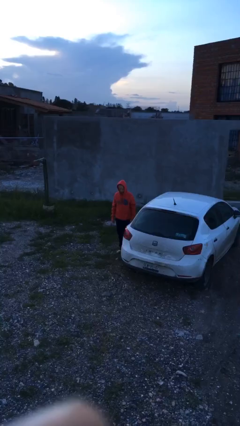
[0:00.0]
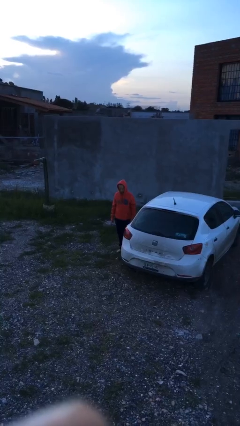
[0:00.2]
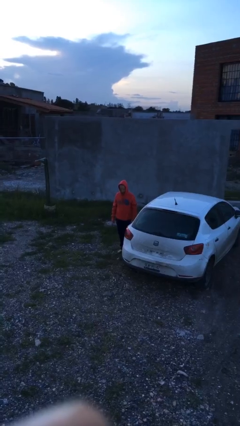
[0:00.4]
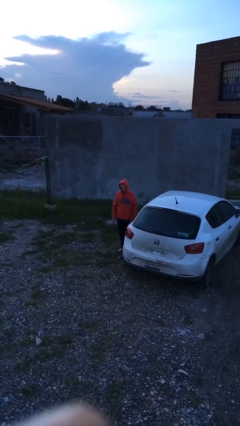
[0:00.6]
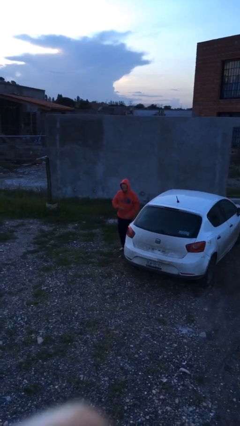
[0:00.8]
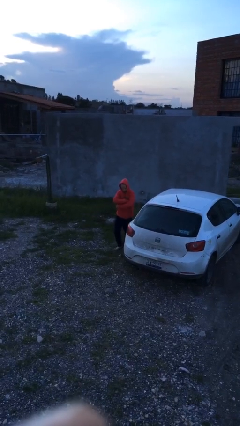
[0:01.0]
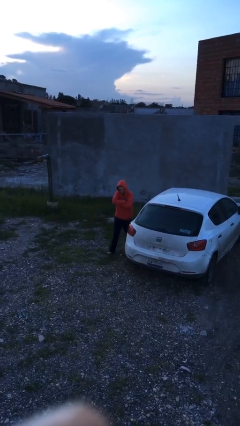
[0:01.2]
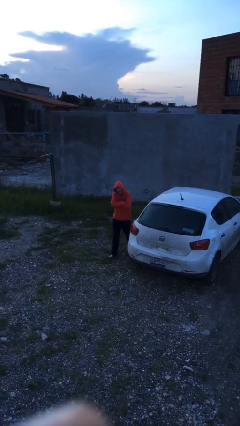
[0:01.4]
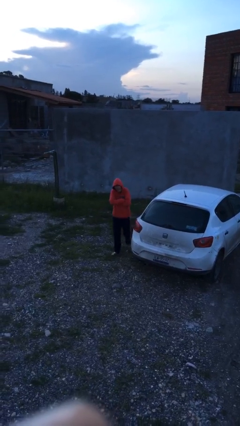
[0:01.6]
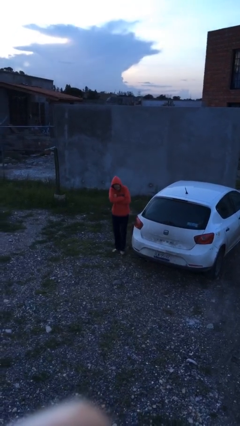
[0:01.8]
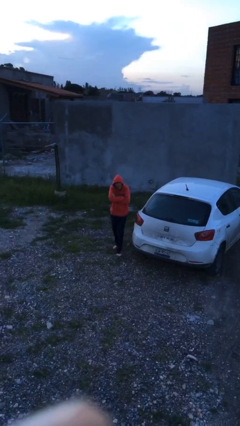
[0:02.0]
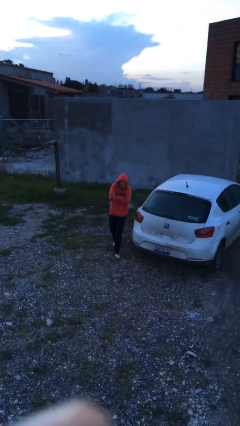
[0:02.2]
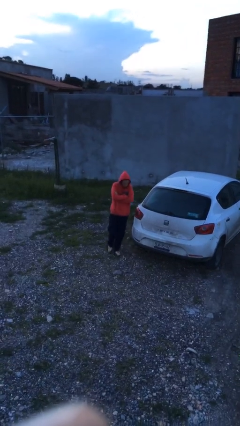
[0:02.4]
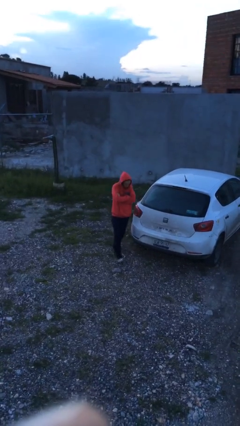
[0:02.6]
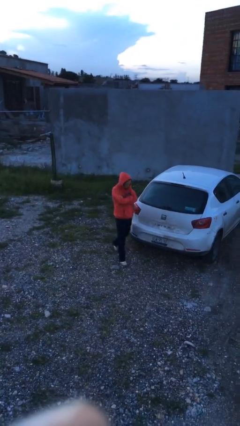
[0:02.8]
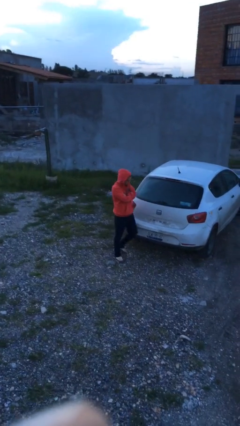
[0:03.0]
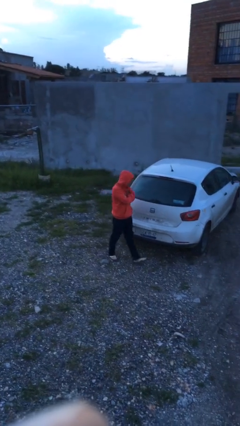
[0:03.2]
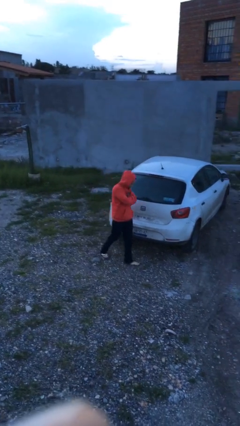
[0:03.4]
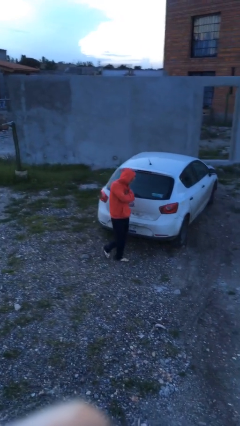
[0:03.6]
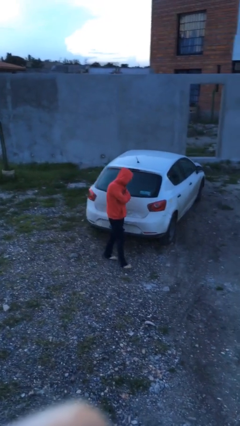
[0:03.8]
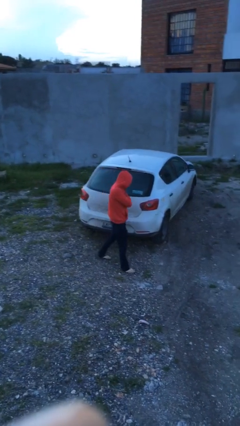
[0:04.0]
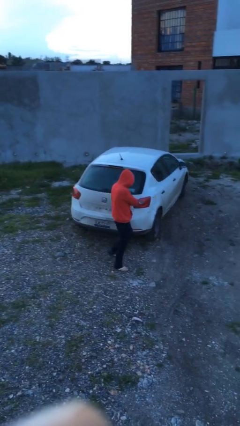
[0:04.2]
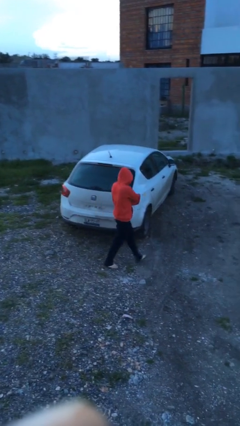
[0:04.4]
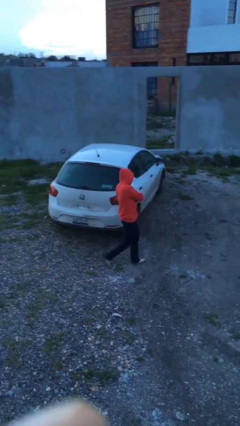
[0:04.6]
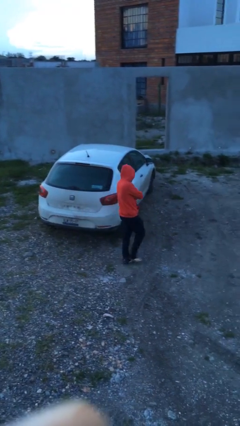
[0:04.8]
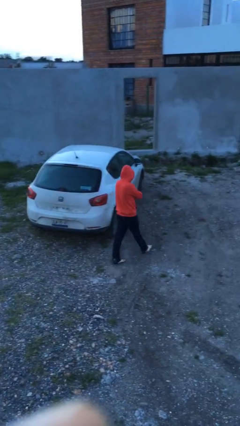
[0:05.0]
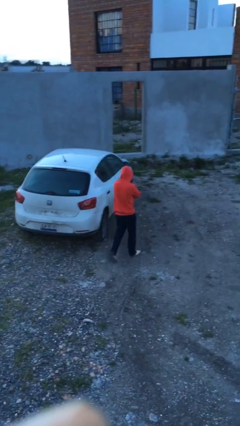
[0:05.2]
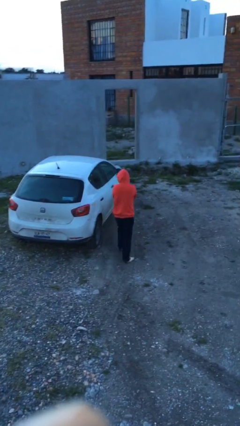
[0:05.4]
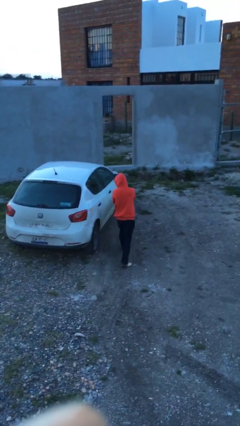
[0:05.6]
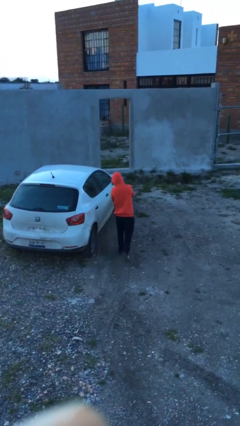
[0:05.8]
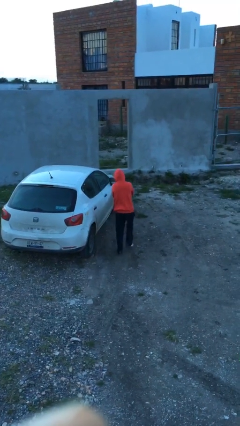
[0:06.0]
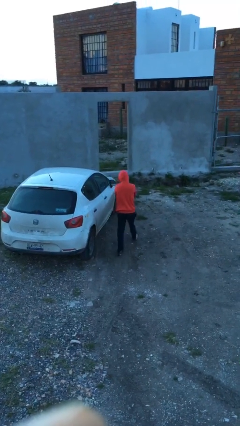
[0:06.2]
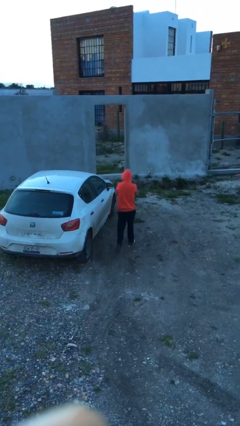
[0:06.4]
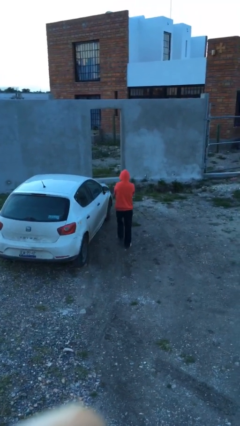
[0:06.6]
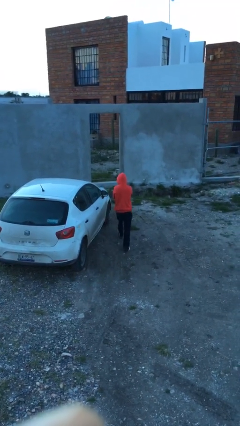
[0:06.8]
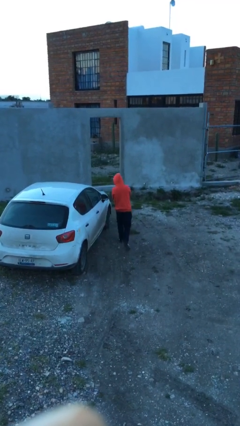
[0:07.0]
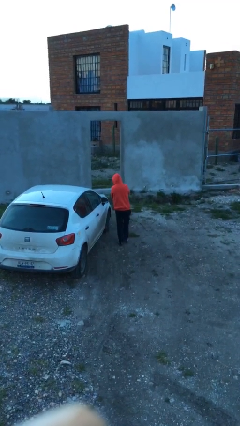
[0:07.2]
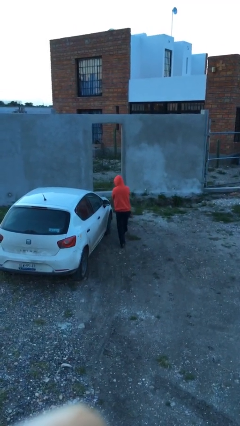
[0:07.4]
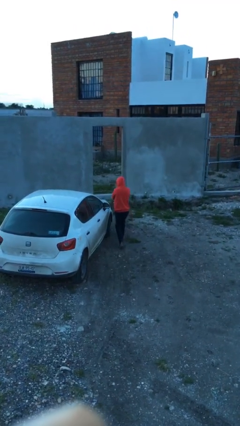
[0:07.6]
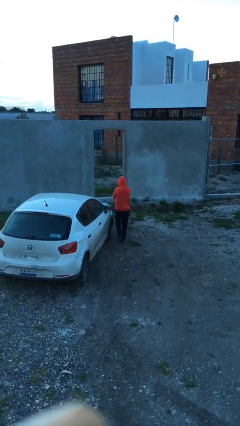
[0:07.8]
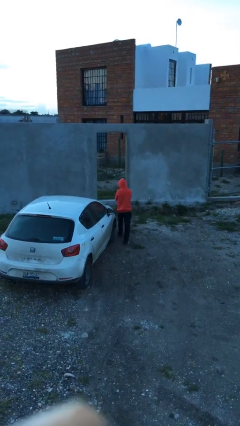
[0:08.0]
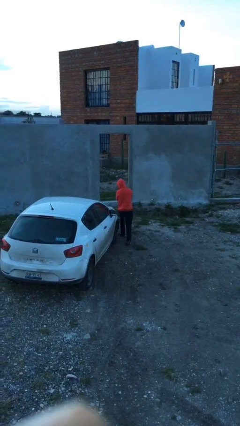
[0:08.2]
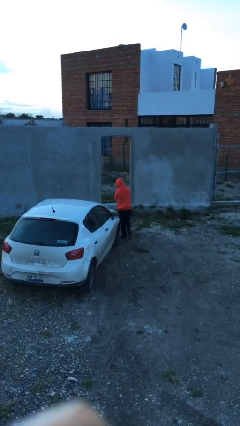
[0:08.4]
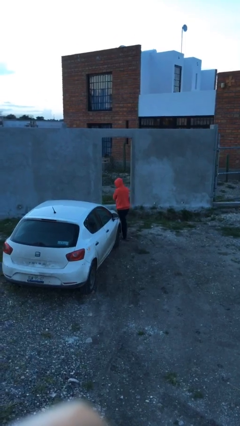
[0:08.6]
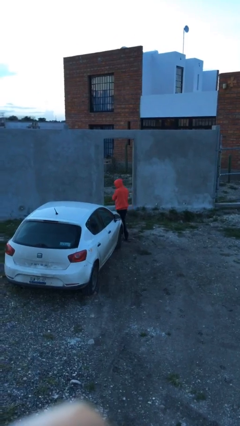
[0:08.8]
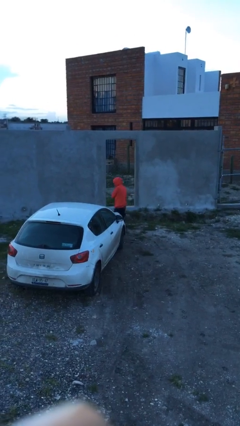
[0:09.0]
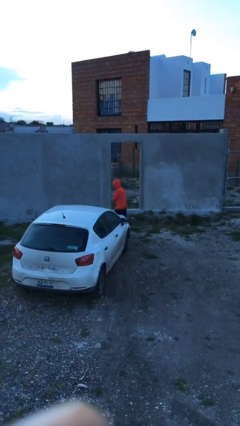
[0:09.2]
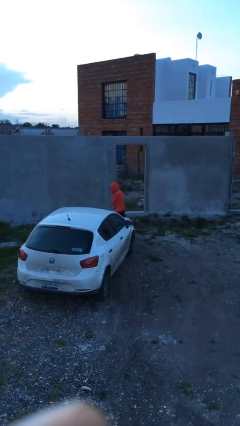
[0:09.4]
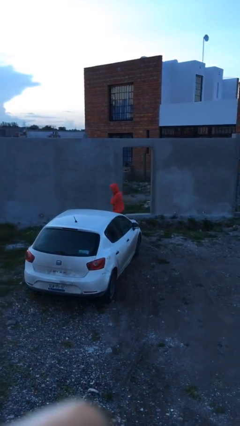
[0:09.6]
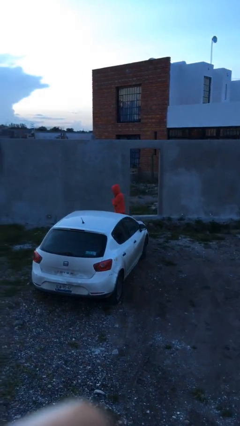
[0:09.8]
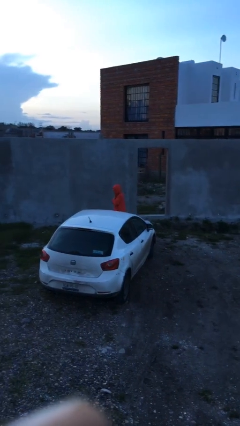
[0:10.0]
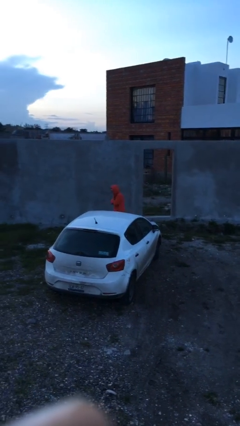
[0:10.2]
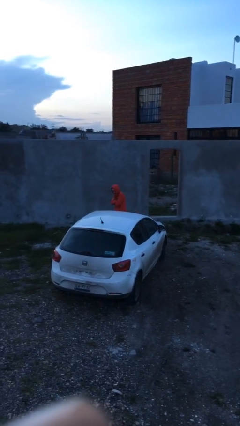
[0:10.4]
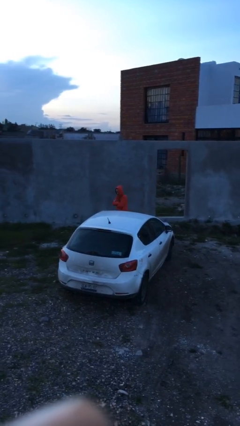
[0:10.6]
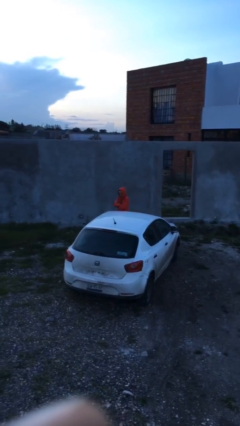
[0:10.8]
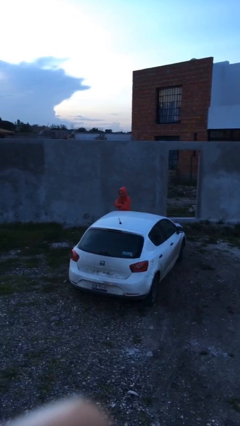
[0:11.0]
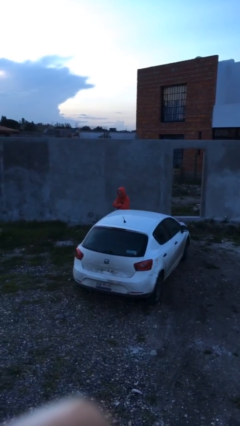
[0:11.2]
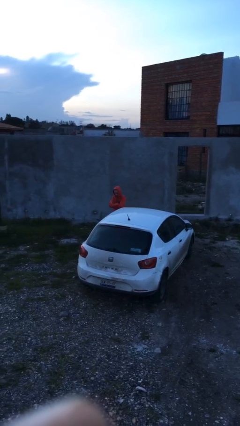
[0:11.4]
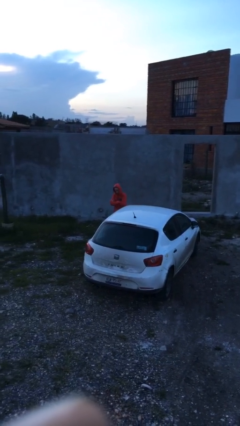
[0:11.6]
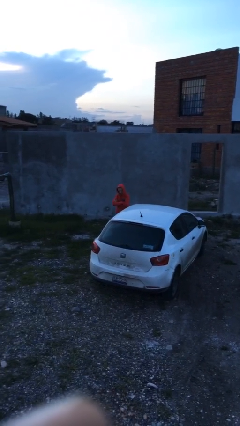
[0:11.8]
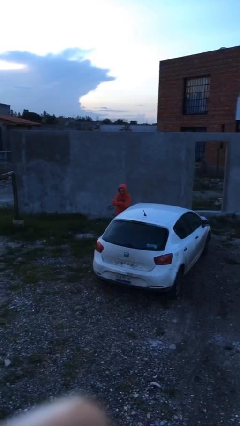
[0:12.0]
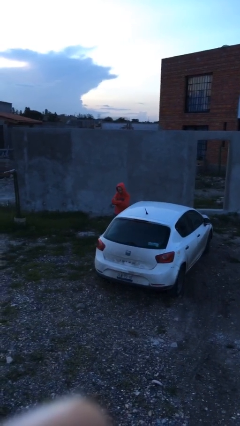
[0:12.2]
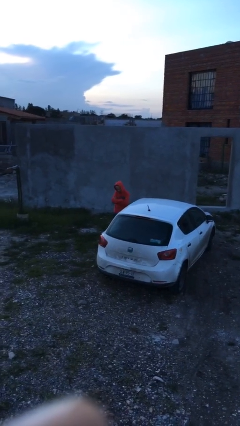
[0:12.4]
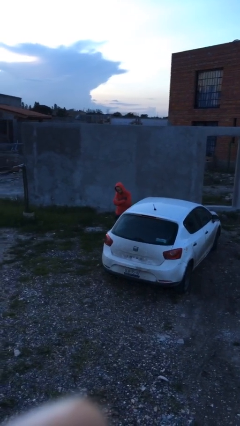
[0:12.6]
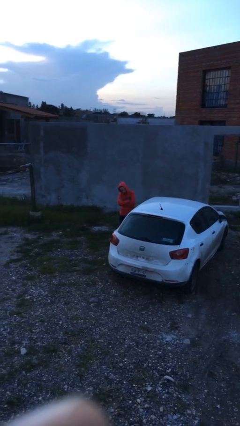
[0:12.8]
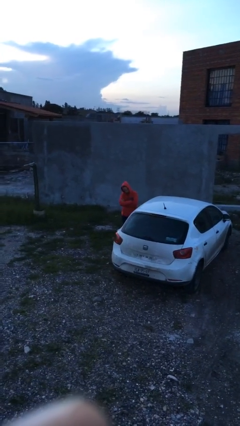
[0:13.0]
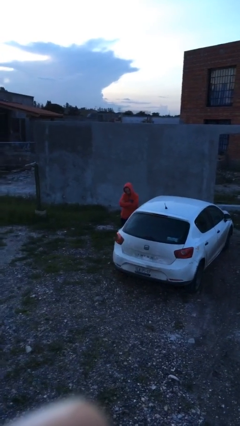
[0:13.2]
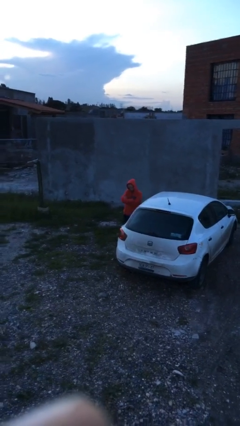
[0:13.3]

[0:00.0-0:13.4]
person walks around car

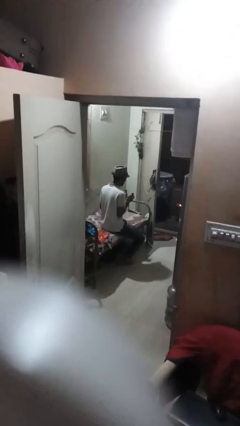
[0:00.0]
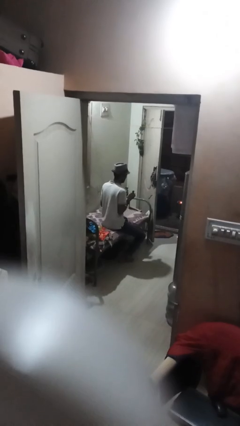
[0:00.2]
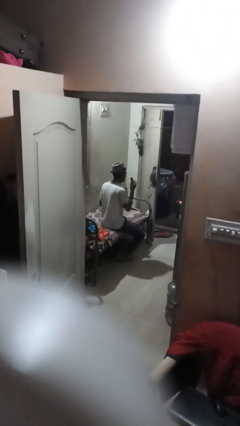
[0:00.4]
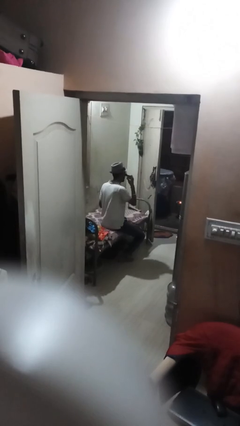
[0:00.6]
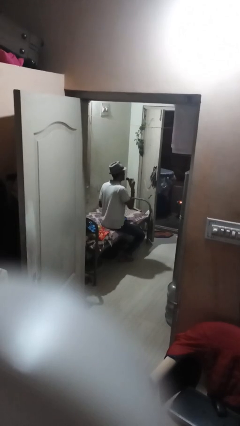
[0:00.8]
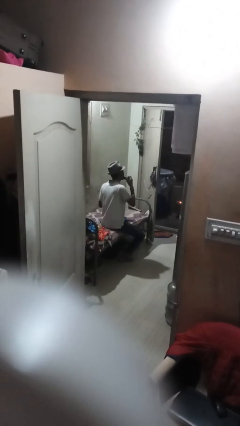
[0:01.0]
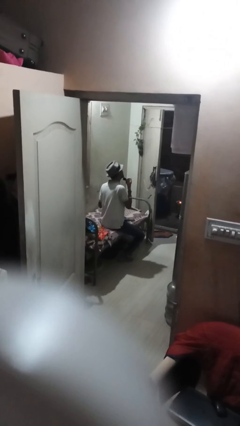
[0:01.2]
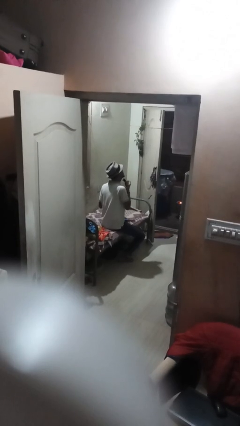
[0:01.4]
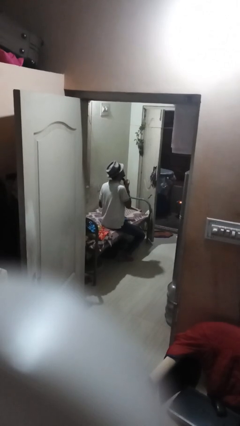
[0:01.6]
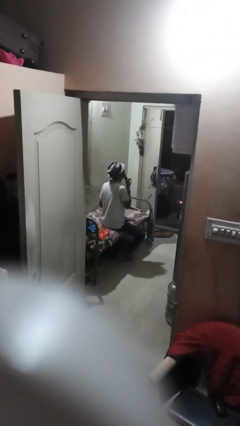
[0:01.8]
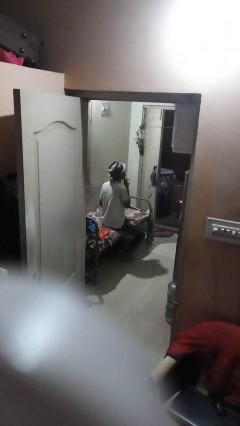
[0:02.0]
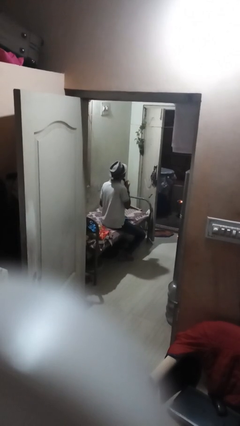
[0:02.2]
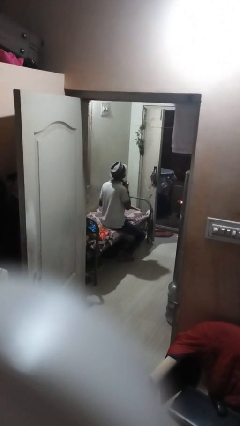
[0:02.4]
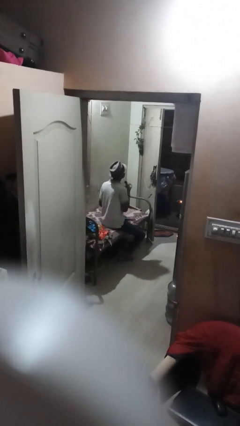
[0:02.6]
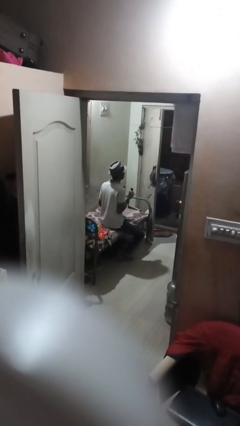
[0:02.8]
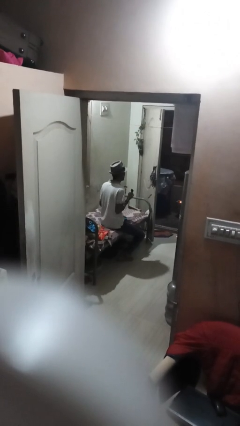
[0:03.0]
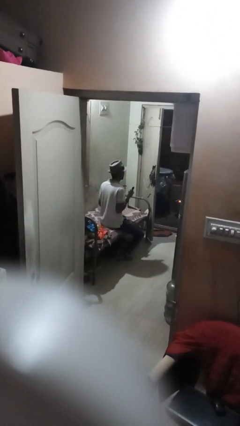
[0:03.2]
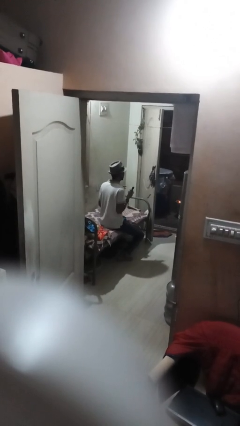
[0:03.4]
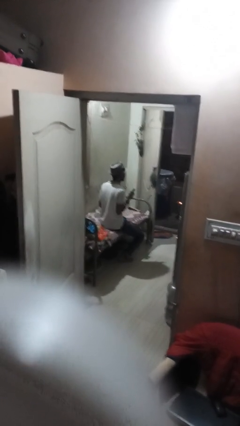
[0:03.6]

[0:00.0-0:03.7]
person applies shaving cream

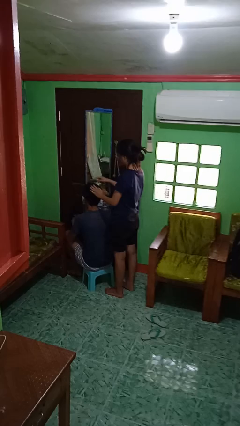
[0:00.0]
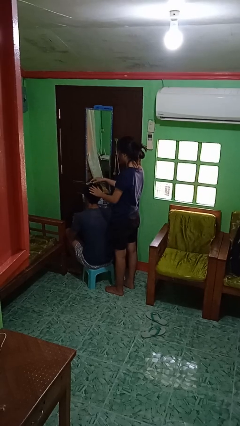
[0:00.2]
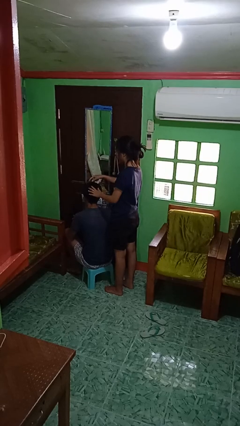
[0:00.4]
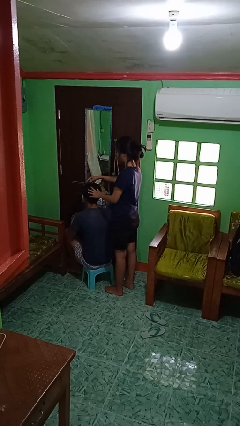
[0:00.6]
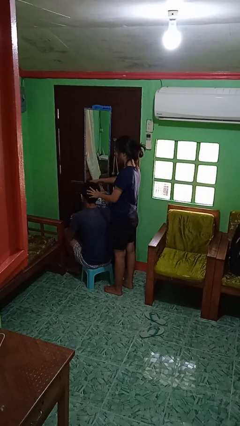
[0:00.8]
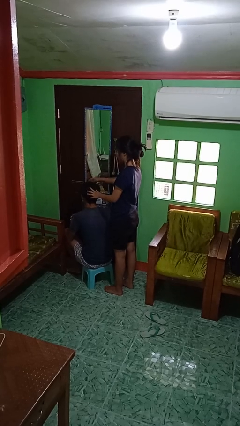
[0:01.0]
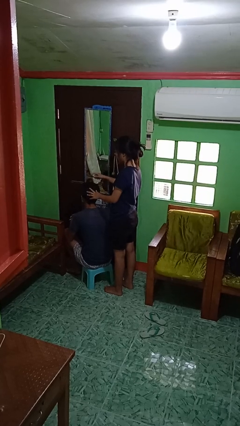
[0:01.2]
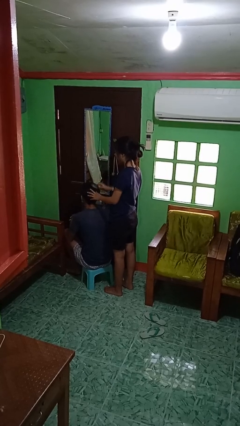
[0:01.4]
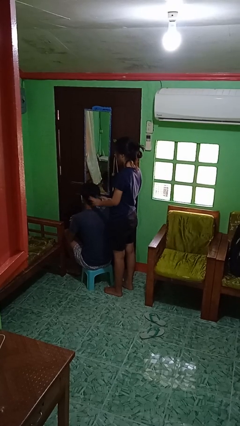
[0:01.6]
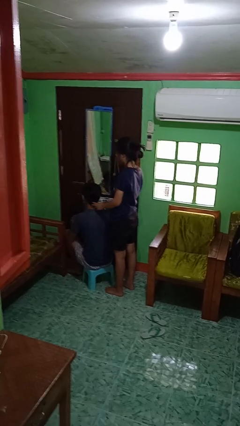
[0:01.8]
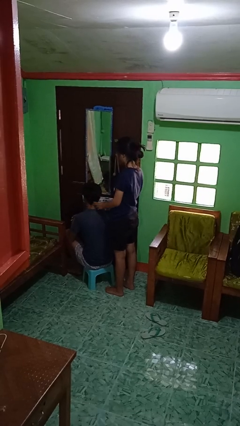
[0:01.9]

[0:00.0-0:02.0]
person brushes hair of person
